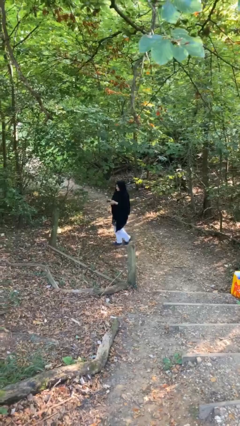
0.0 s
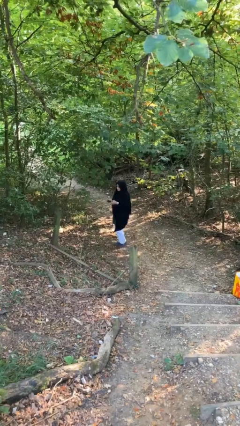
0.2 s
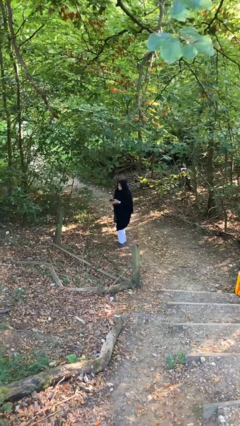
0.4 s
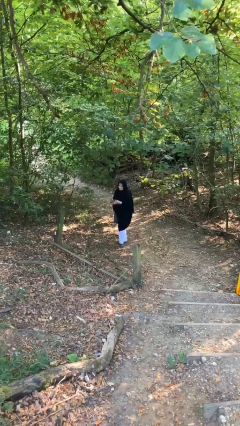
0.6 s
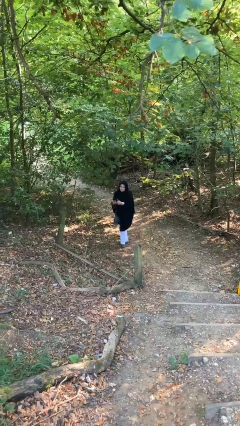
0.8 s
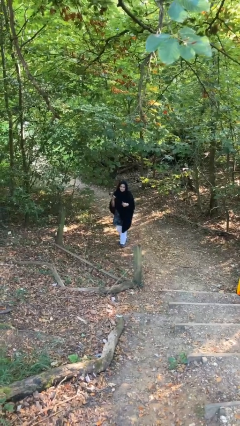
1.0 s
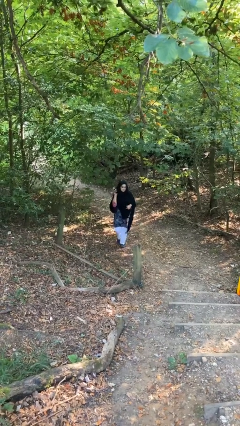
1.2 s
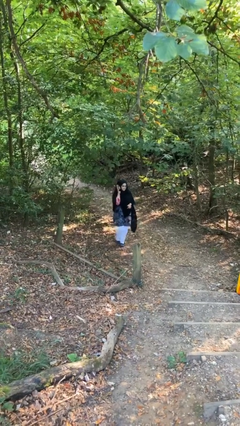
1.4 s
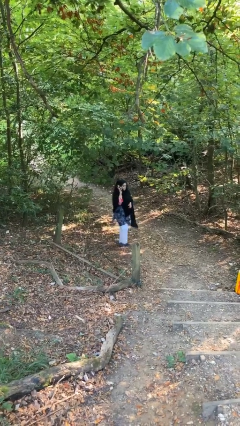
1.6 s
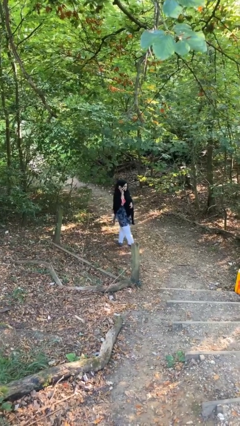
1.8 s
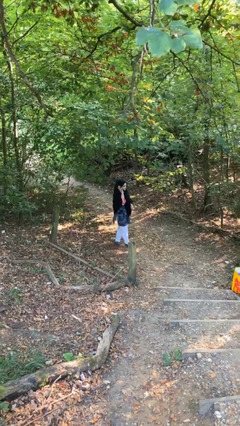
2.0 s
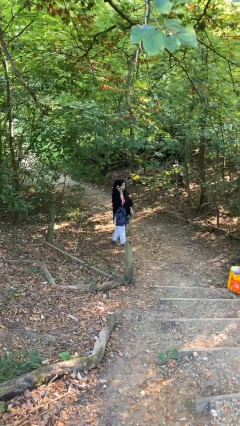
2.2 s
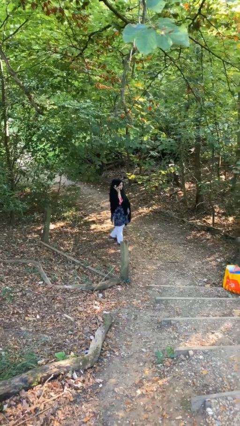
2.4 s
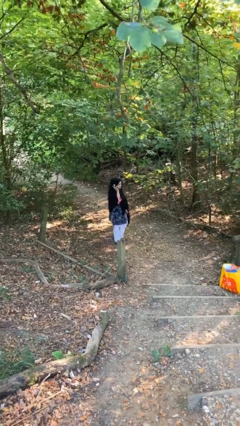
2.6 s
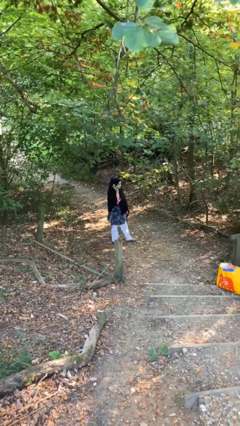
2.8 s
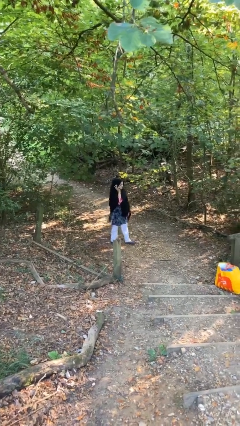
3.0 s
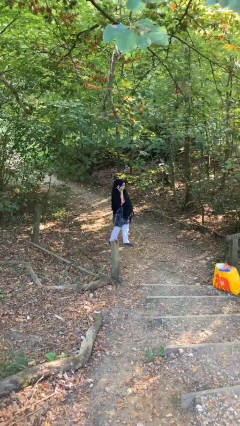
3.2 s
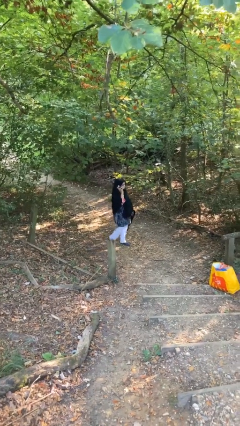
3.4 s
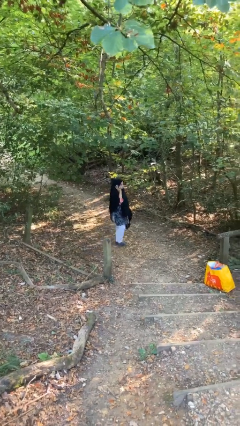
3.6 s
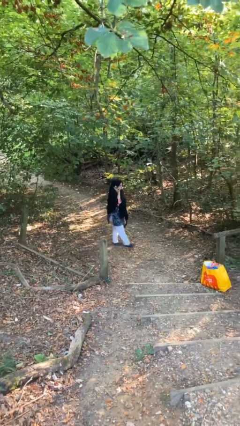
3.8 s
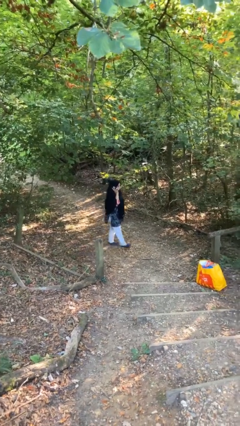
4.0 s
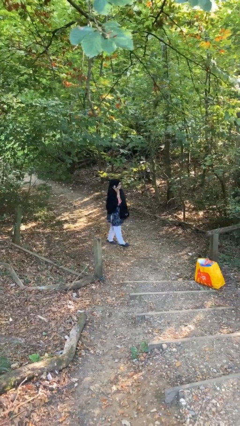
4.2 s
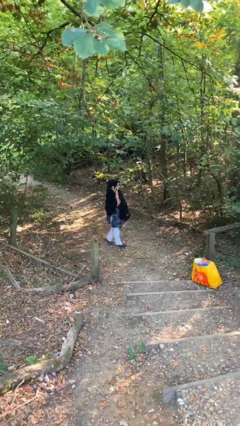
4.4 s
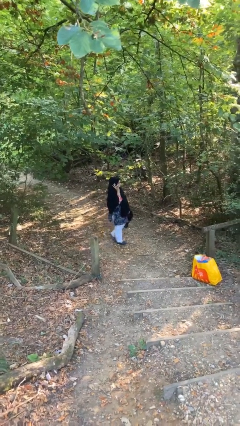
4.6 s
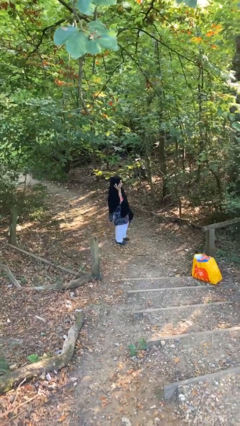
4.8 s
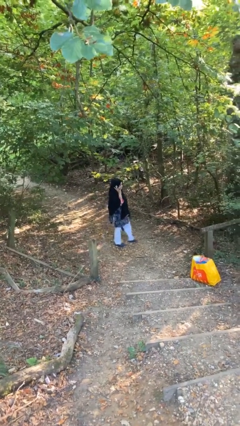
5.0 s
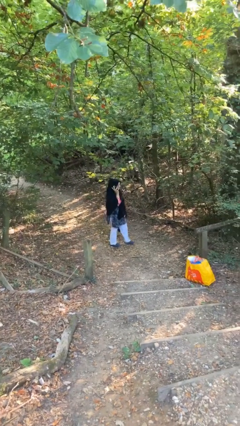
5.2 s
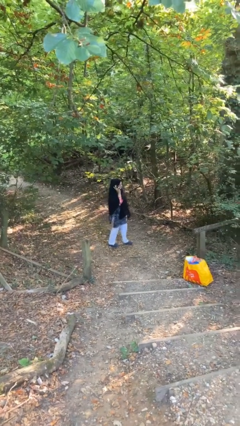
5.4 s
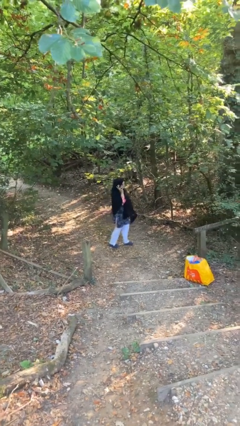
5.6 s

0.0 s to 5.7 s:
person talks on phone

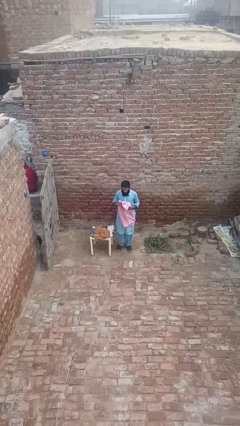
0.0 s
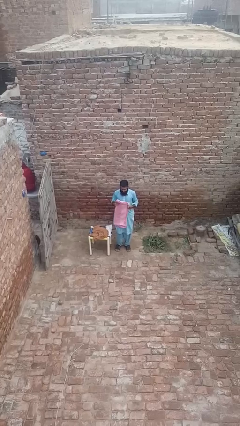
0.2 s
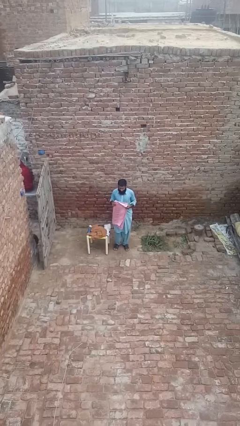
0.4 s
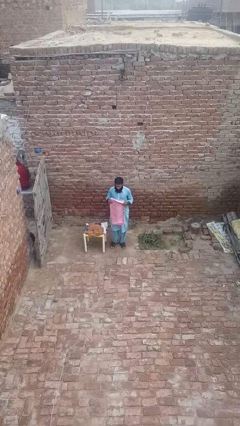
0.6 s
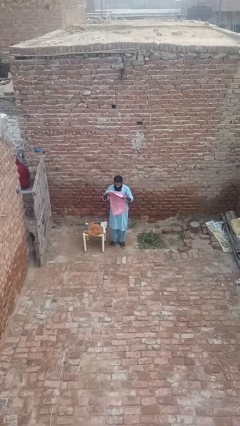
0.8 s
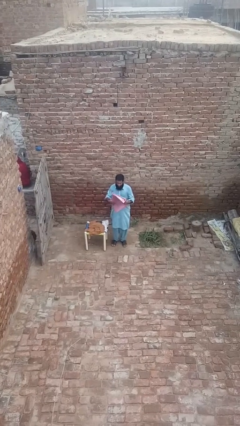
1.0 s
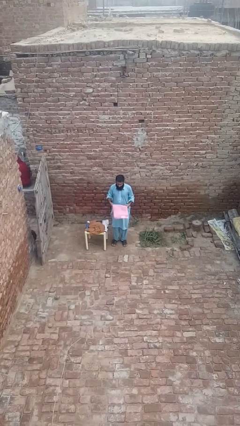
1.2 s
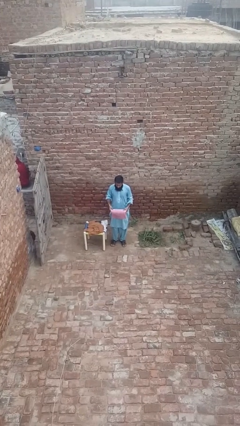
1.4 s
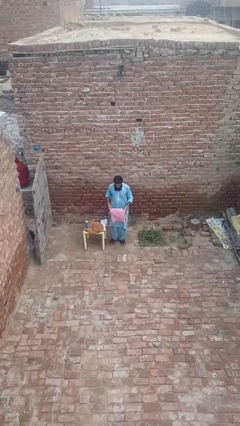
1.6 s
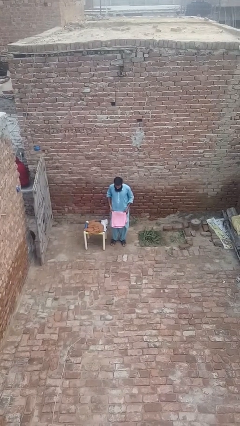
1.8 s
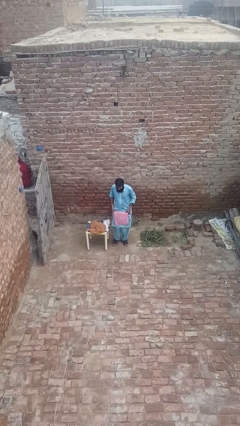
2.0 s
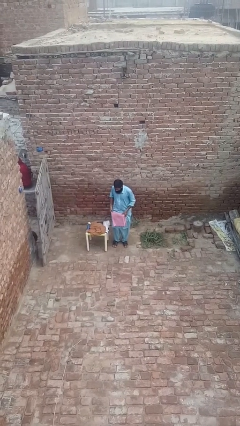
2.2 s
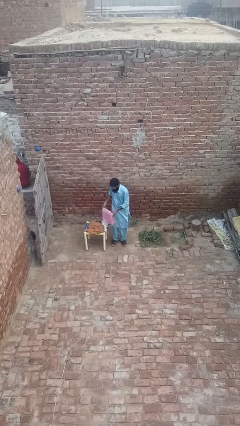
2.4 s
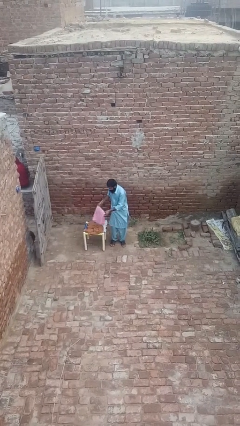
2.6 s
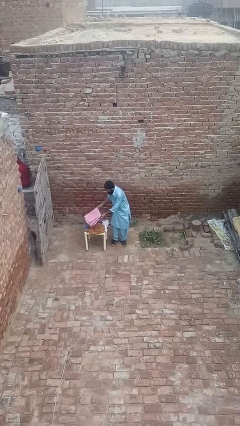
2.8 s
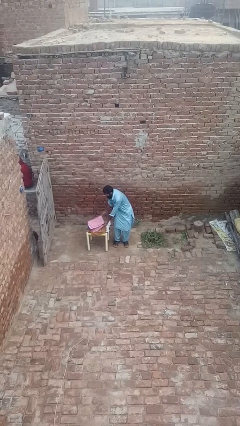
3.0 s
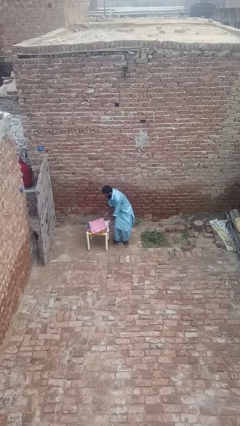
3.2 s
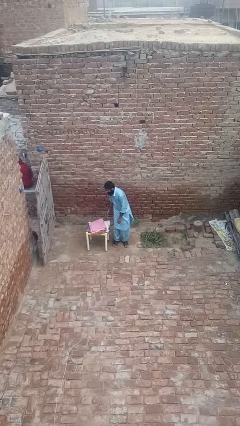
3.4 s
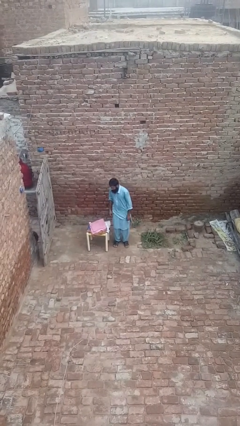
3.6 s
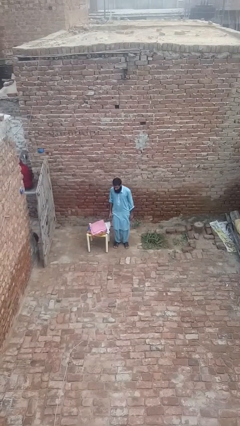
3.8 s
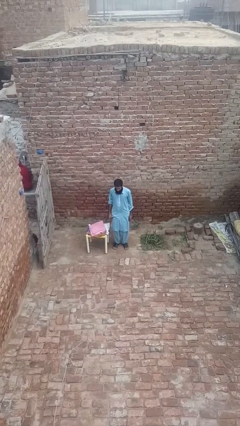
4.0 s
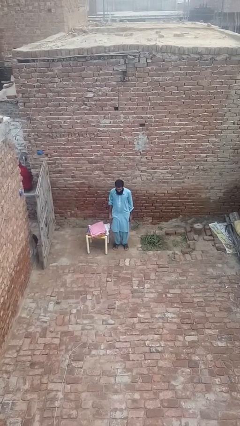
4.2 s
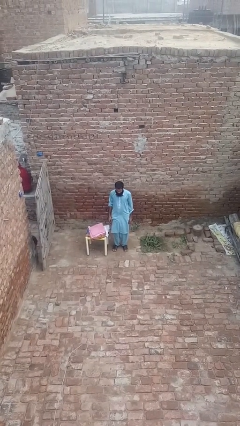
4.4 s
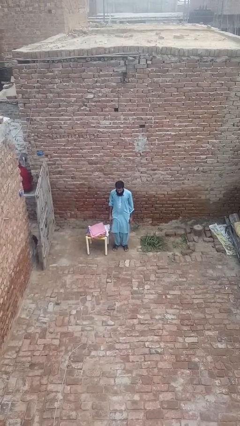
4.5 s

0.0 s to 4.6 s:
person folds towel

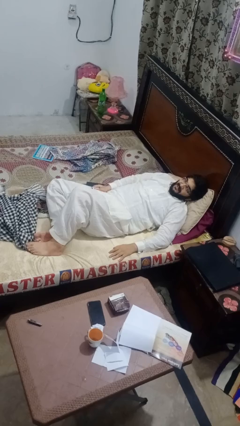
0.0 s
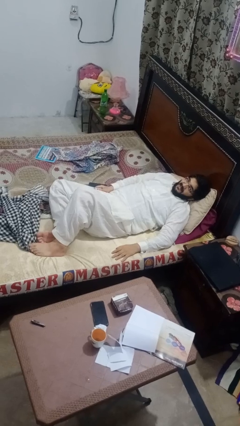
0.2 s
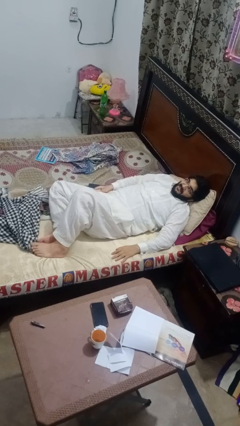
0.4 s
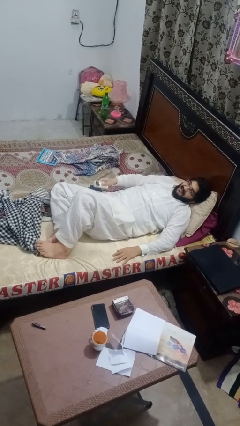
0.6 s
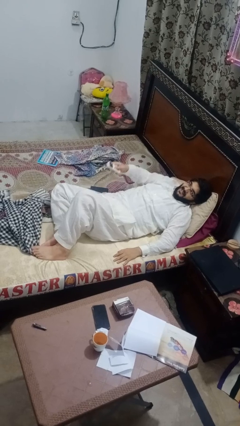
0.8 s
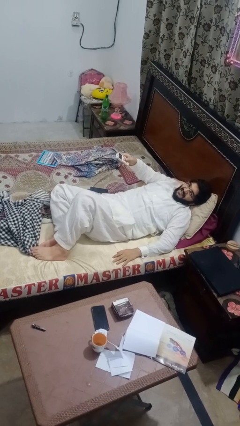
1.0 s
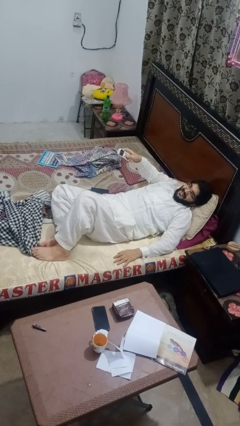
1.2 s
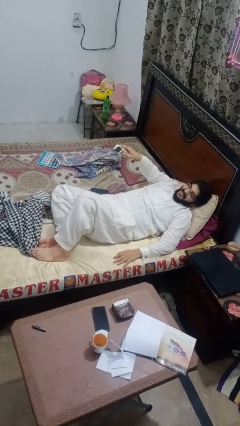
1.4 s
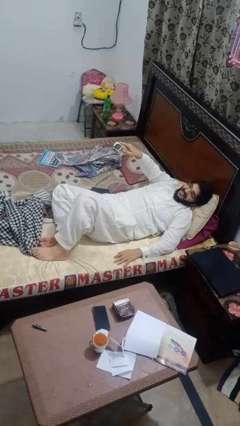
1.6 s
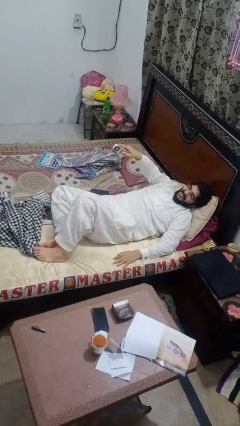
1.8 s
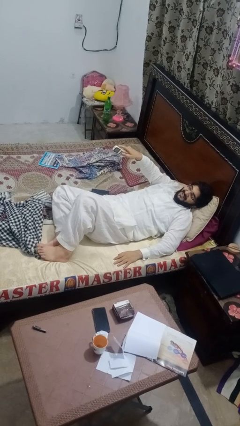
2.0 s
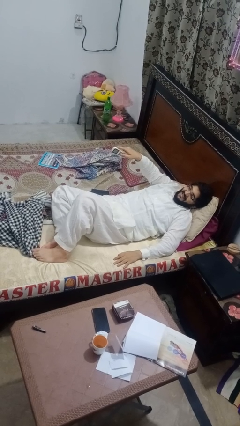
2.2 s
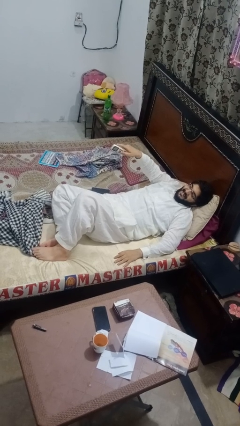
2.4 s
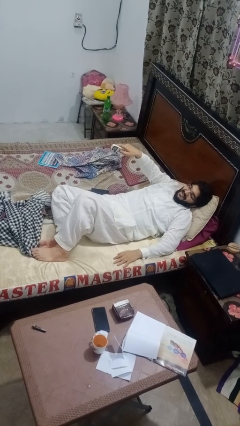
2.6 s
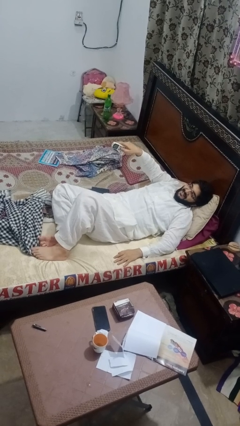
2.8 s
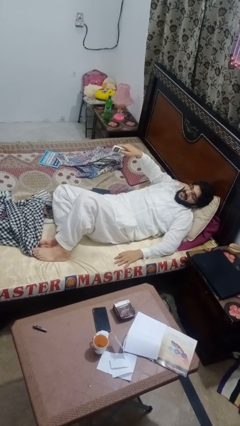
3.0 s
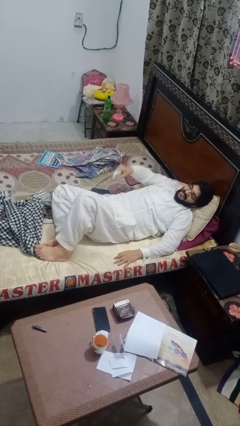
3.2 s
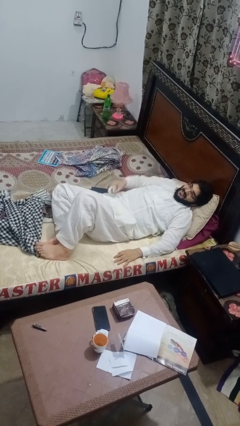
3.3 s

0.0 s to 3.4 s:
person uses television remote

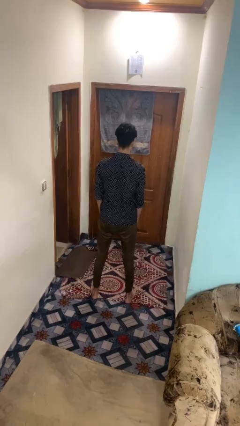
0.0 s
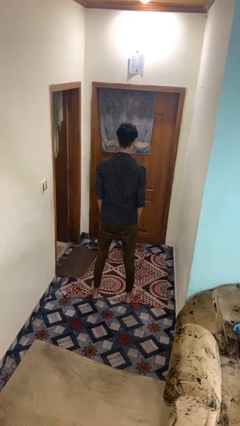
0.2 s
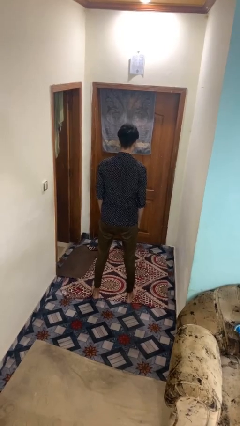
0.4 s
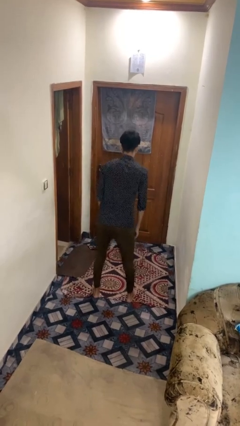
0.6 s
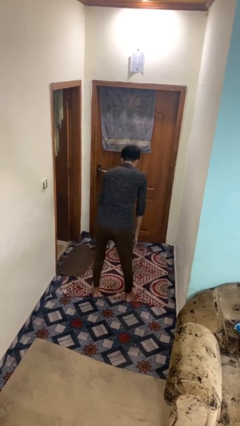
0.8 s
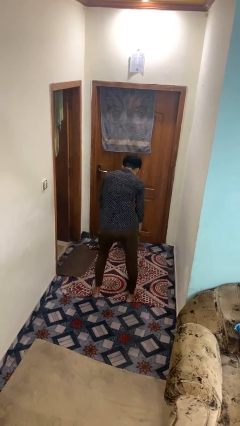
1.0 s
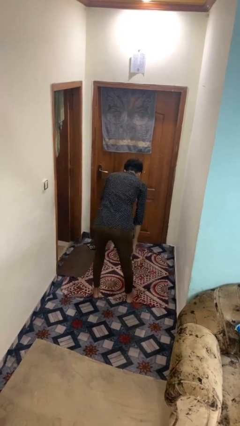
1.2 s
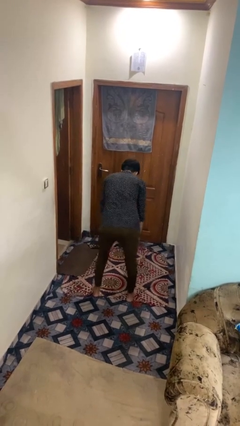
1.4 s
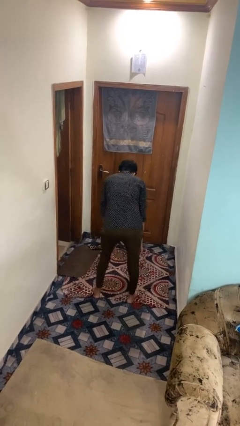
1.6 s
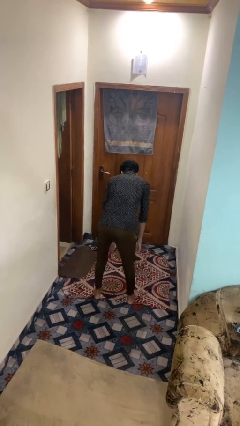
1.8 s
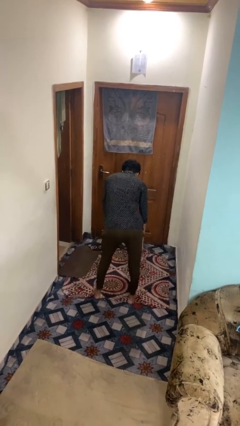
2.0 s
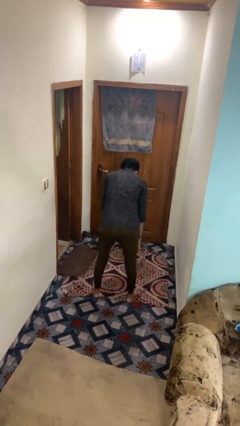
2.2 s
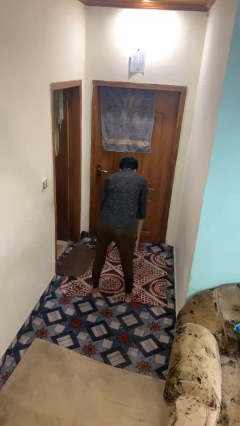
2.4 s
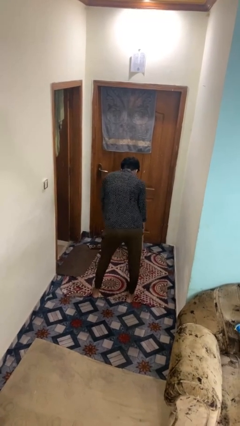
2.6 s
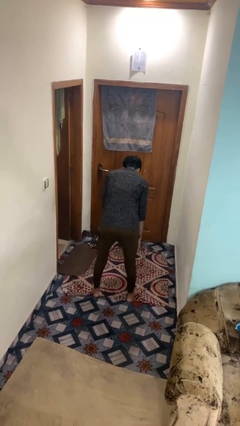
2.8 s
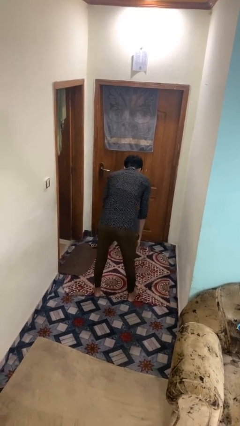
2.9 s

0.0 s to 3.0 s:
person wiggles hips

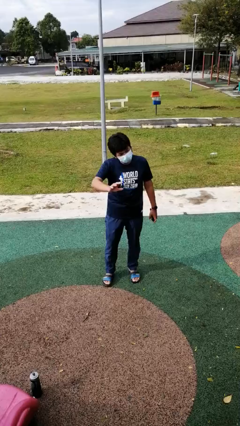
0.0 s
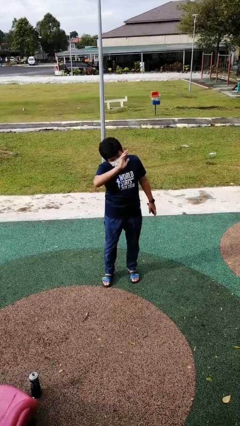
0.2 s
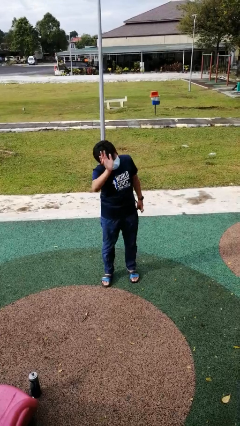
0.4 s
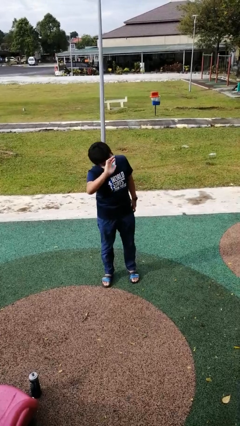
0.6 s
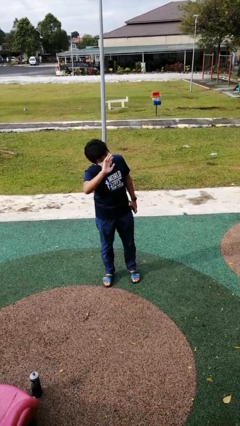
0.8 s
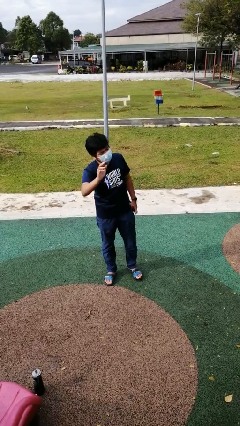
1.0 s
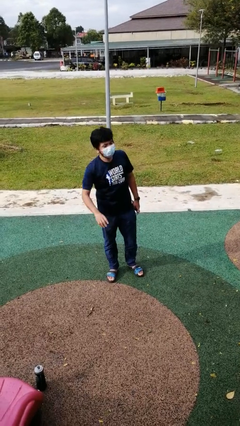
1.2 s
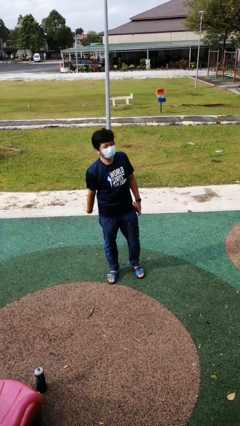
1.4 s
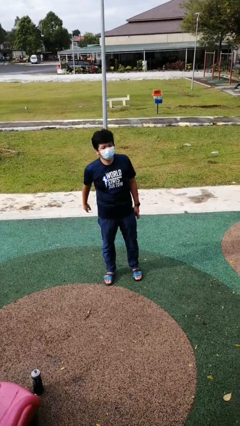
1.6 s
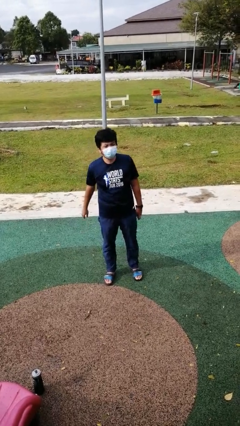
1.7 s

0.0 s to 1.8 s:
person waves at person
